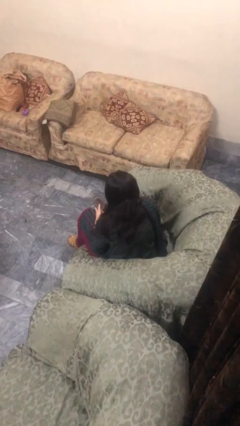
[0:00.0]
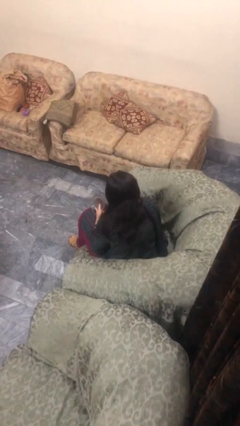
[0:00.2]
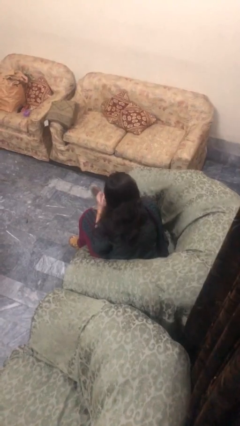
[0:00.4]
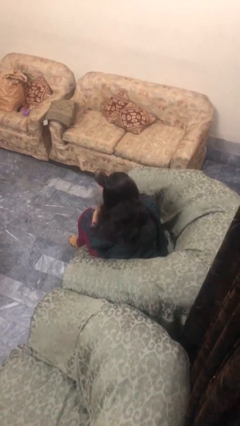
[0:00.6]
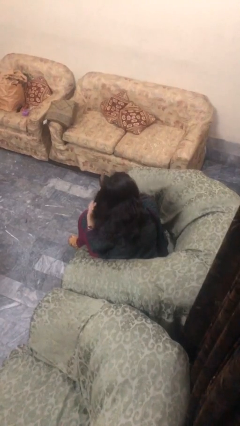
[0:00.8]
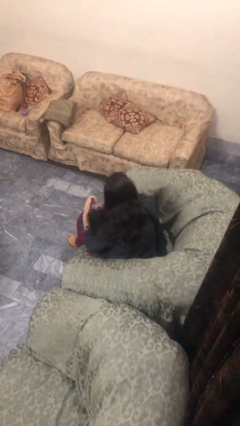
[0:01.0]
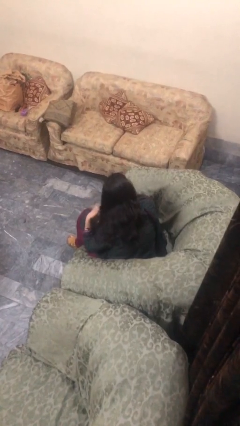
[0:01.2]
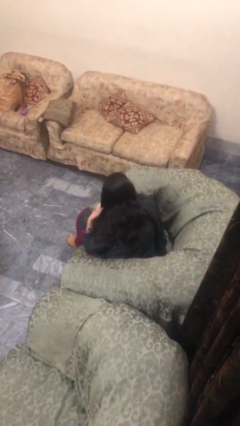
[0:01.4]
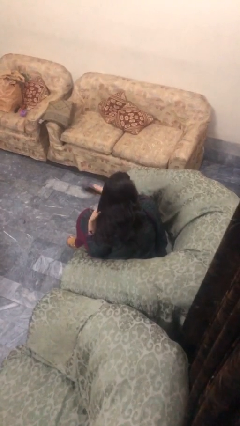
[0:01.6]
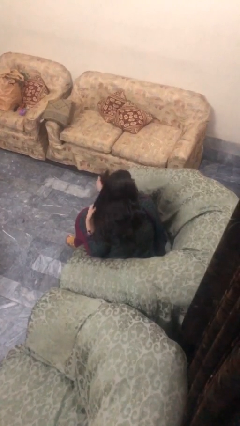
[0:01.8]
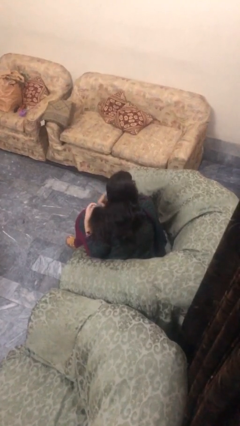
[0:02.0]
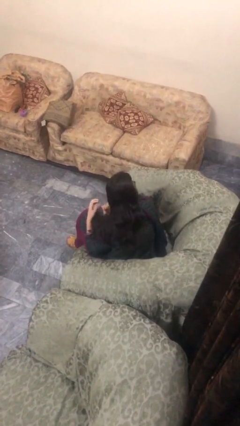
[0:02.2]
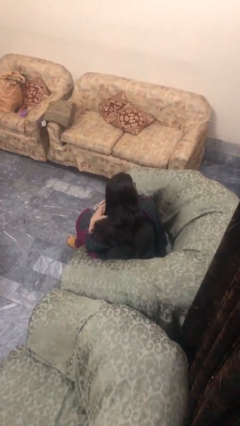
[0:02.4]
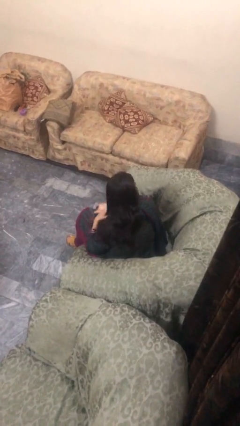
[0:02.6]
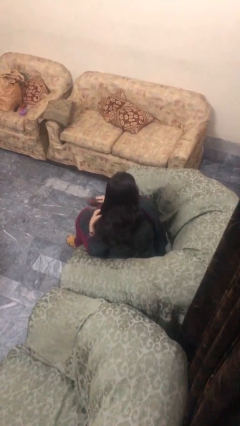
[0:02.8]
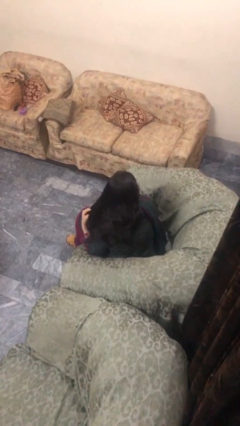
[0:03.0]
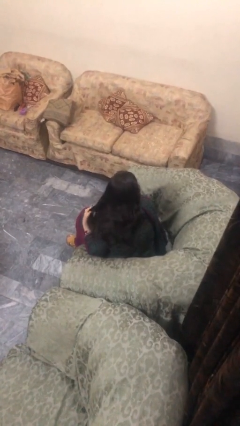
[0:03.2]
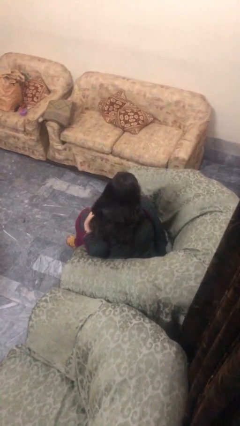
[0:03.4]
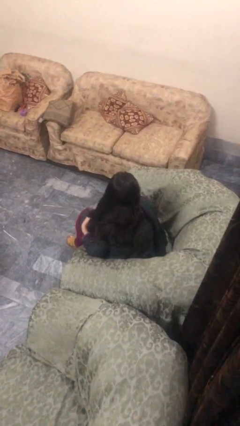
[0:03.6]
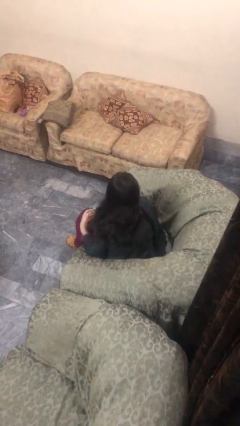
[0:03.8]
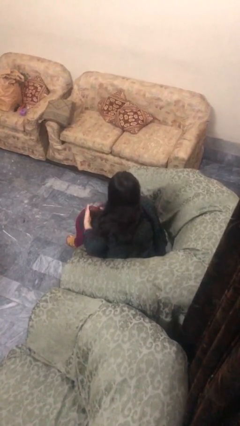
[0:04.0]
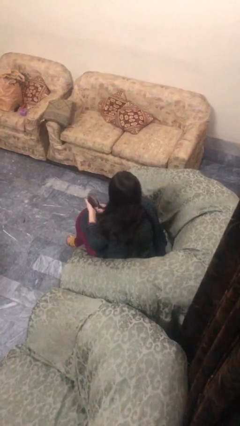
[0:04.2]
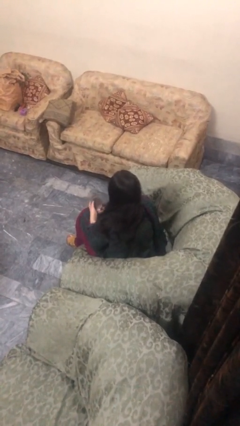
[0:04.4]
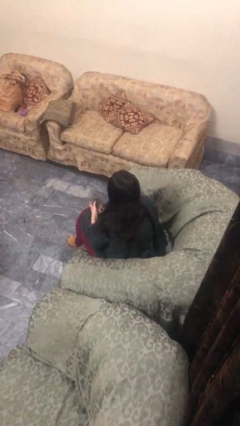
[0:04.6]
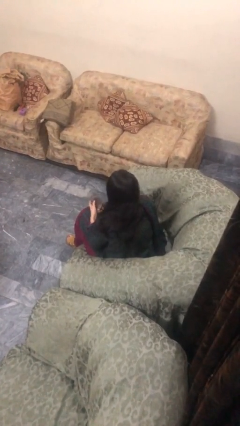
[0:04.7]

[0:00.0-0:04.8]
person brushes hair

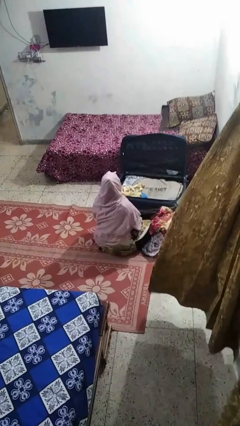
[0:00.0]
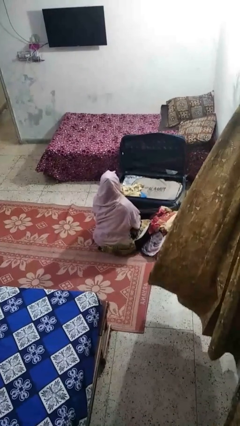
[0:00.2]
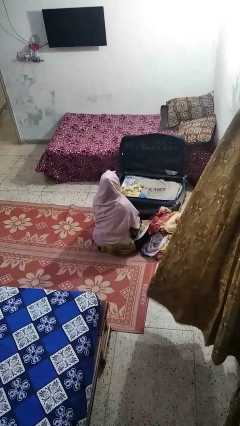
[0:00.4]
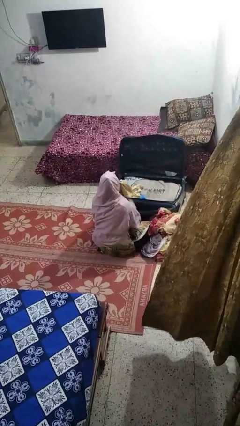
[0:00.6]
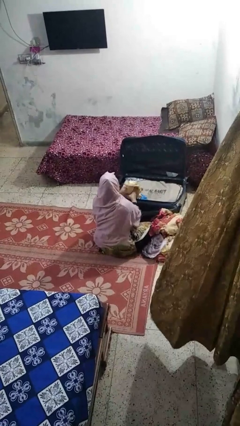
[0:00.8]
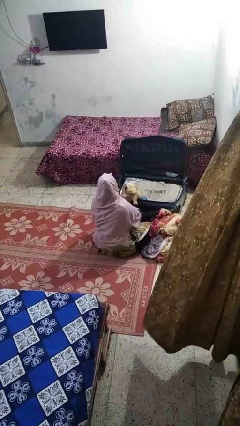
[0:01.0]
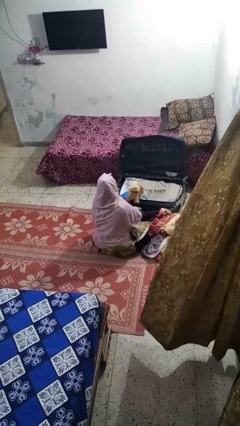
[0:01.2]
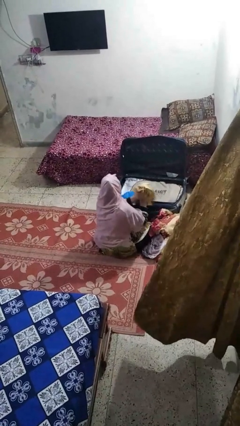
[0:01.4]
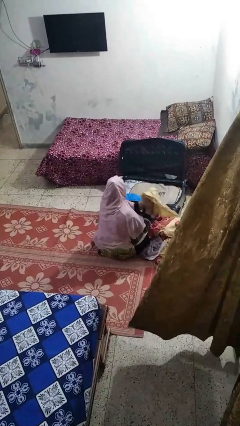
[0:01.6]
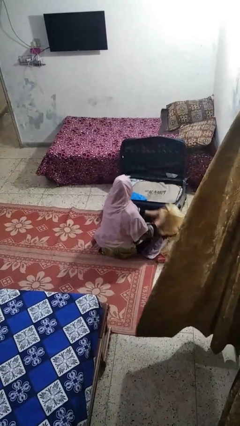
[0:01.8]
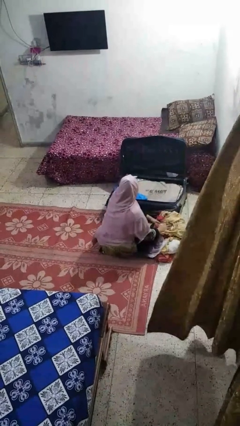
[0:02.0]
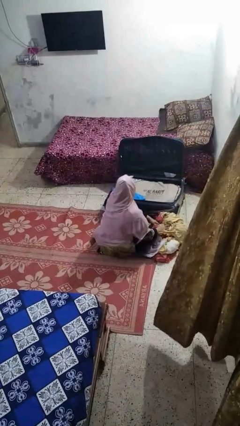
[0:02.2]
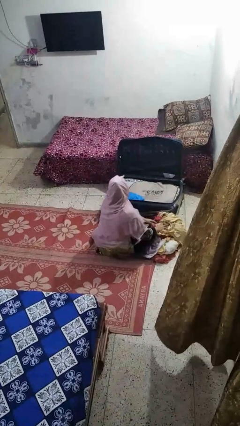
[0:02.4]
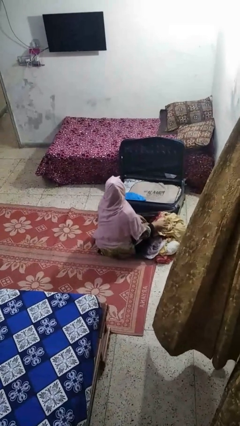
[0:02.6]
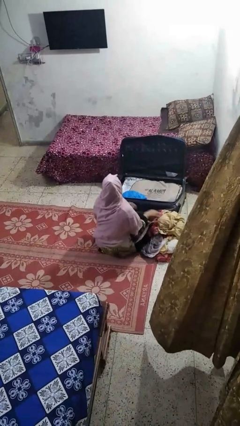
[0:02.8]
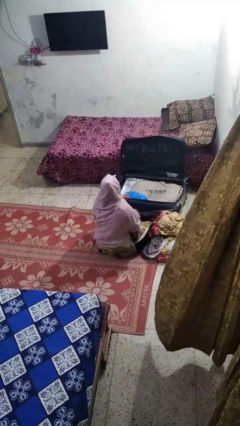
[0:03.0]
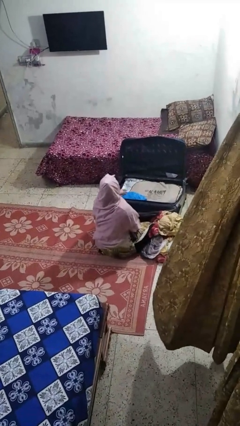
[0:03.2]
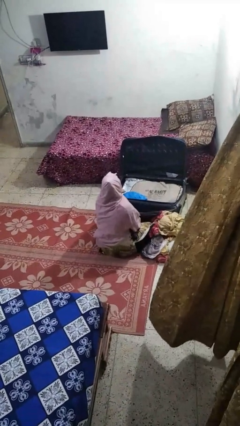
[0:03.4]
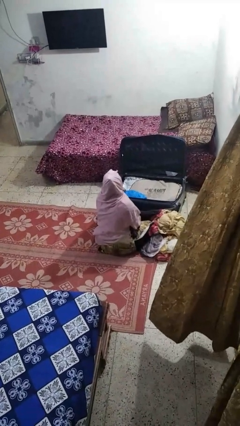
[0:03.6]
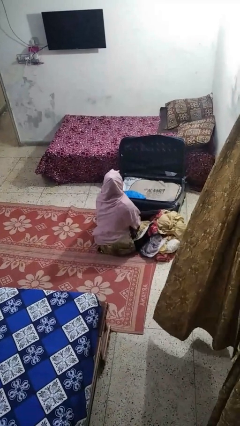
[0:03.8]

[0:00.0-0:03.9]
person unloads clothes from suitcase

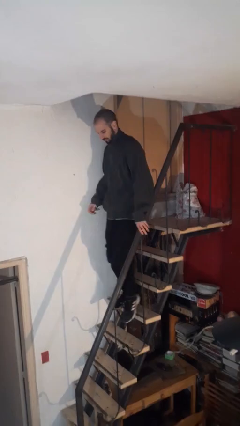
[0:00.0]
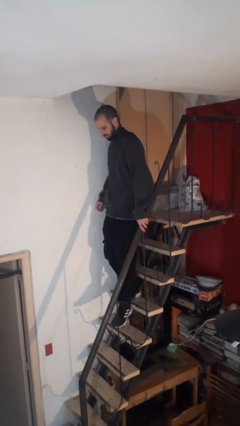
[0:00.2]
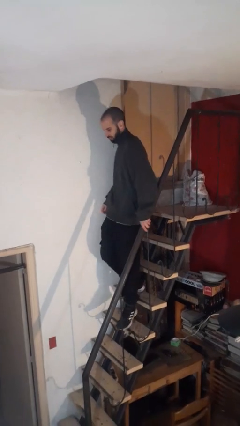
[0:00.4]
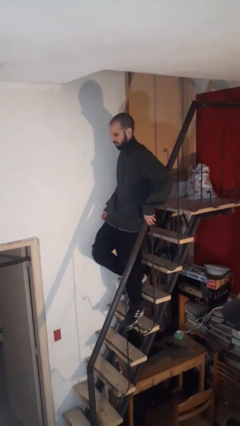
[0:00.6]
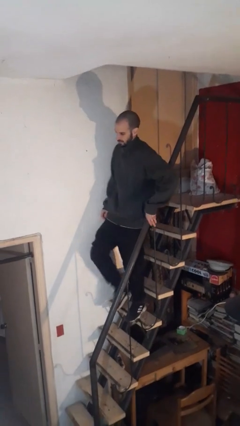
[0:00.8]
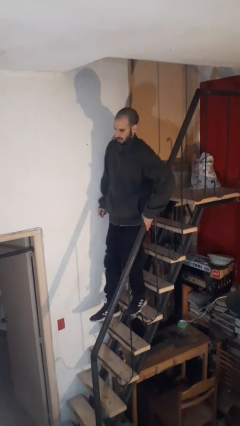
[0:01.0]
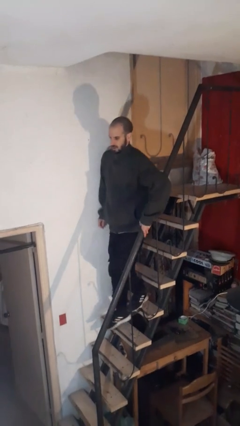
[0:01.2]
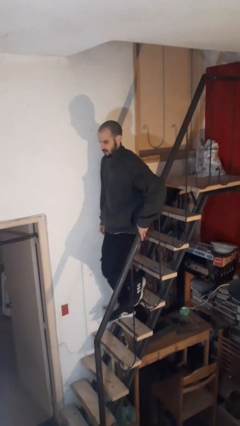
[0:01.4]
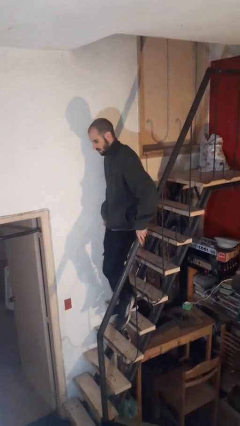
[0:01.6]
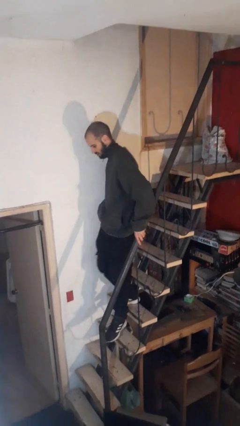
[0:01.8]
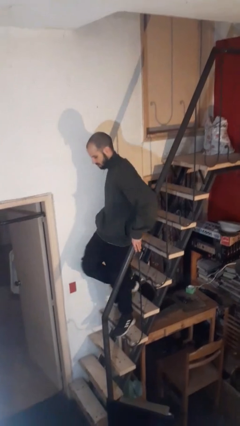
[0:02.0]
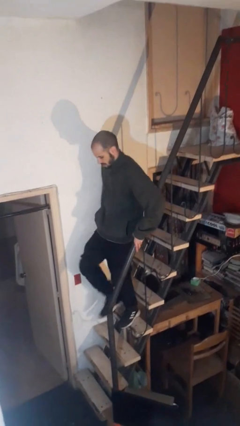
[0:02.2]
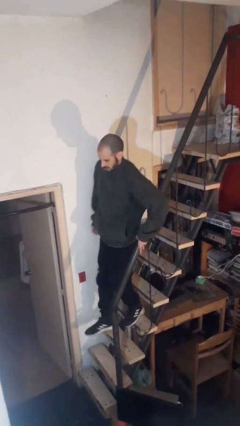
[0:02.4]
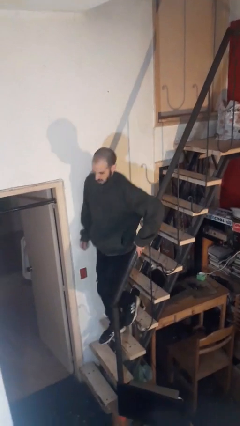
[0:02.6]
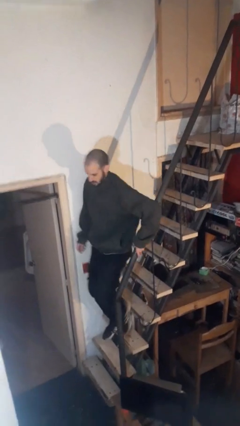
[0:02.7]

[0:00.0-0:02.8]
person climbs down stairs

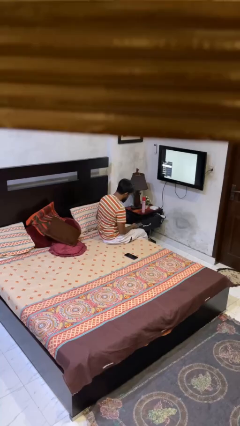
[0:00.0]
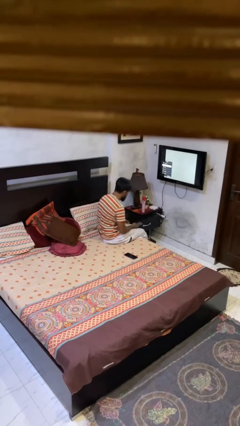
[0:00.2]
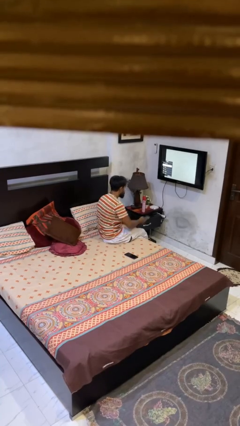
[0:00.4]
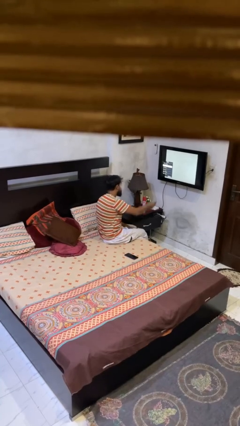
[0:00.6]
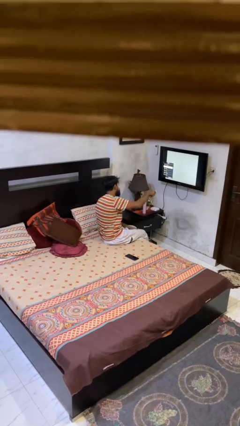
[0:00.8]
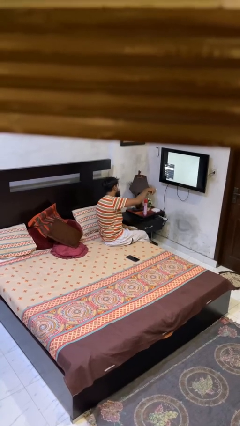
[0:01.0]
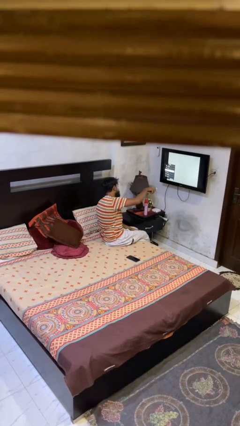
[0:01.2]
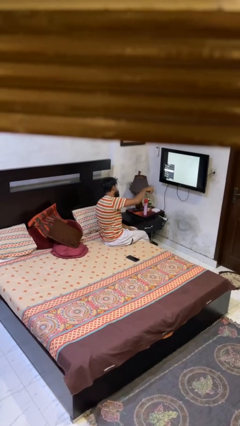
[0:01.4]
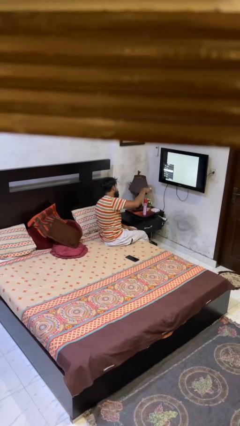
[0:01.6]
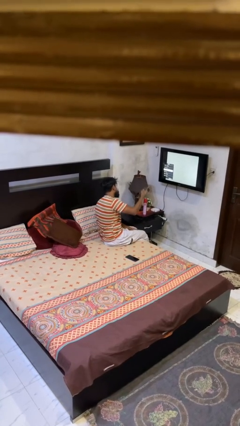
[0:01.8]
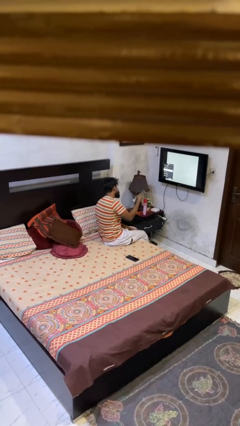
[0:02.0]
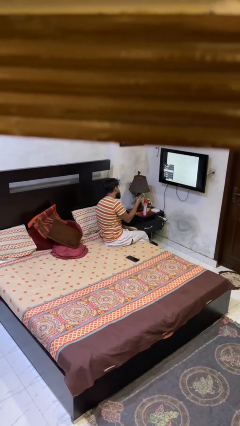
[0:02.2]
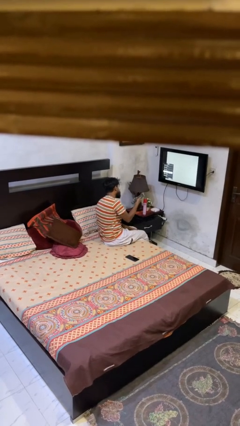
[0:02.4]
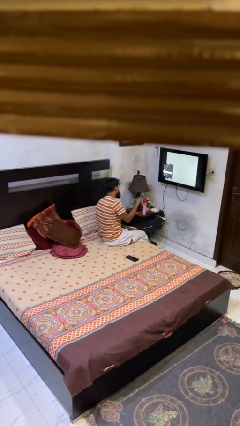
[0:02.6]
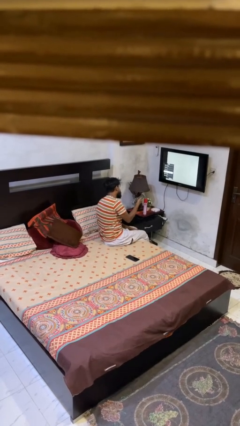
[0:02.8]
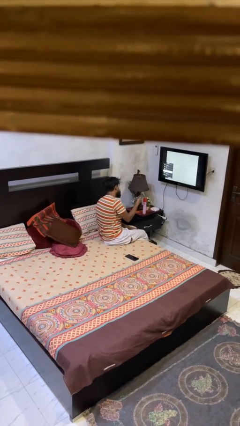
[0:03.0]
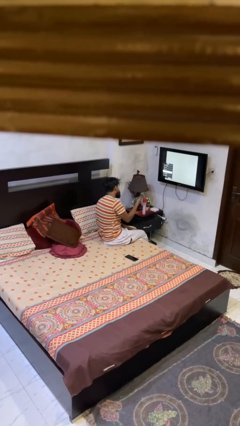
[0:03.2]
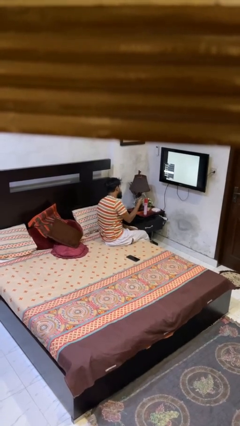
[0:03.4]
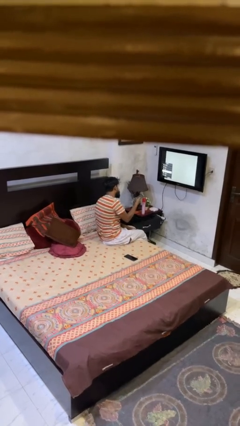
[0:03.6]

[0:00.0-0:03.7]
person uses television remote

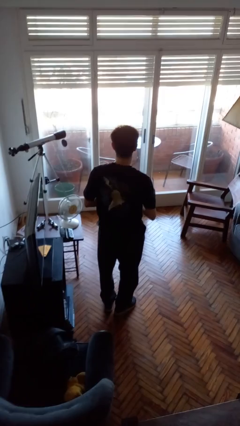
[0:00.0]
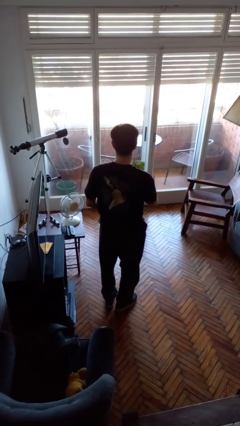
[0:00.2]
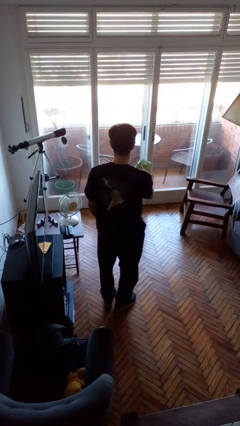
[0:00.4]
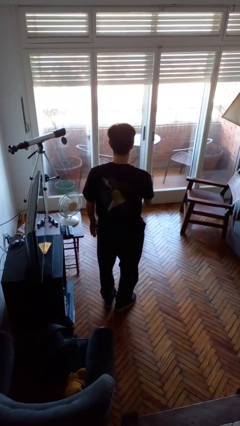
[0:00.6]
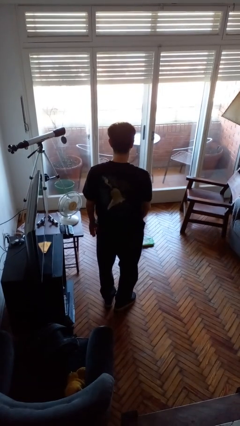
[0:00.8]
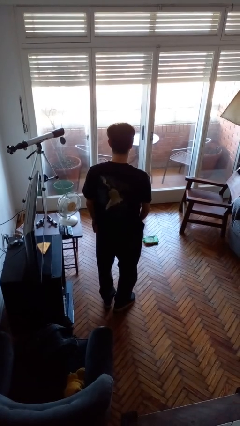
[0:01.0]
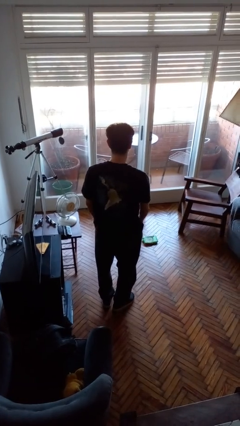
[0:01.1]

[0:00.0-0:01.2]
person throws object to ground

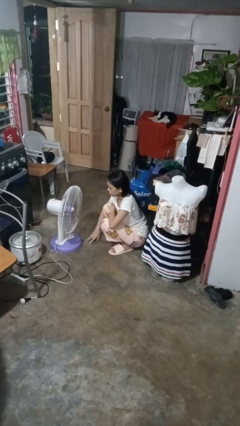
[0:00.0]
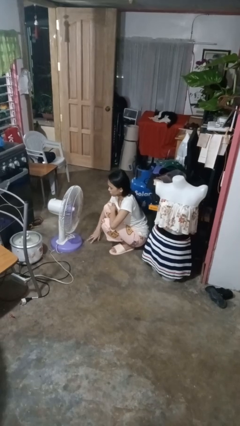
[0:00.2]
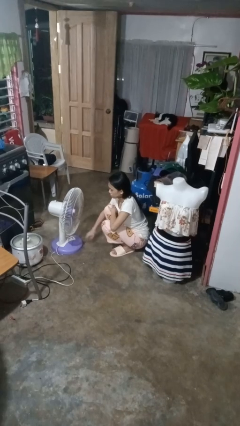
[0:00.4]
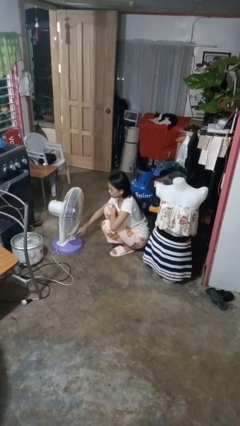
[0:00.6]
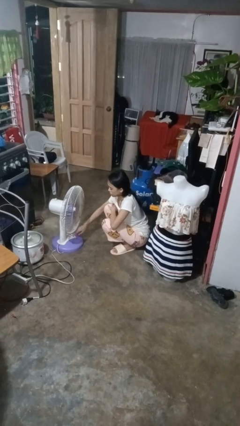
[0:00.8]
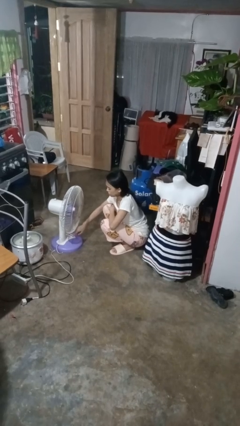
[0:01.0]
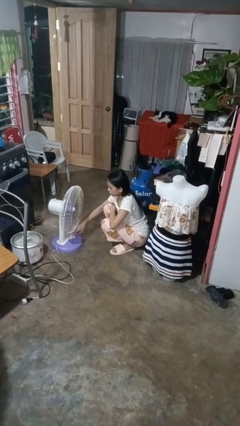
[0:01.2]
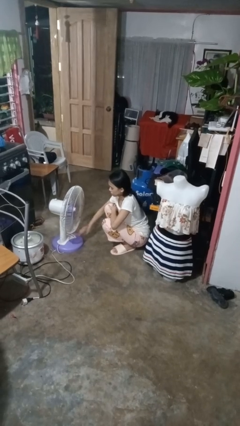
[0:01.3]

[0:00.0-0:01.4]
person turns off fan

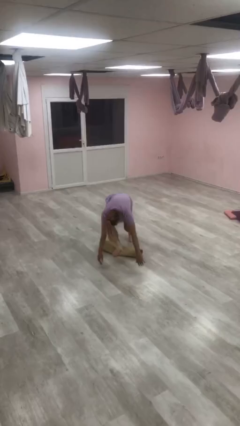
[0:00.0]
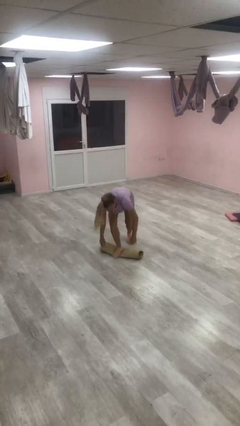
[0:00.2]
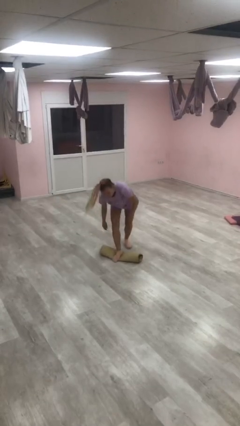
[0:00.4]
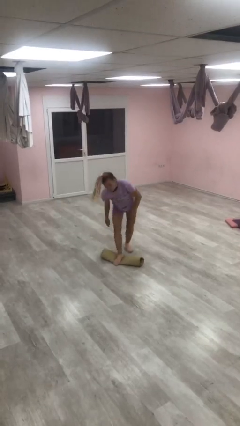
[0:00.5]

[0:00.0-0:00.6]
person stands up from floor
